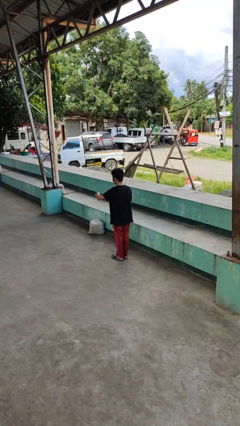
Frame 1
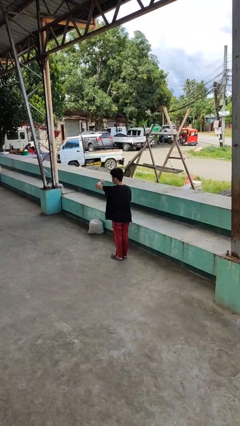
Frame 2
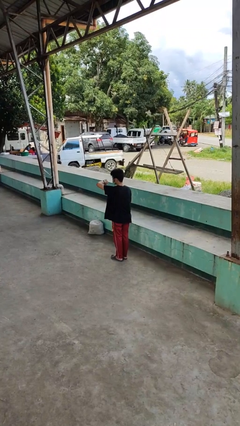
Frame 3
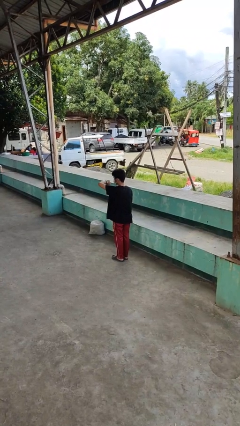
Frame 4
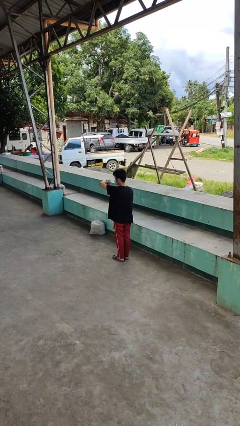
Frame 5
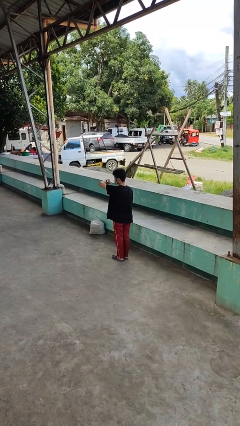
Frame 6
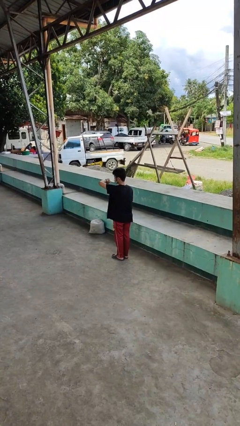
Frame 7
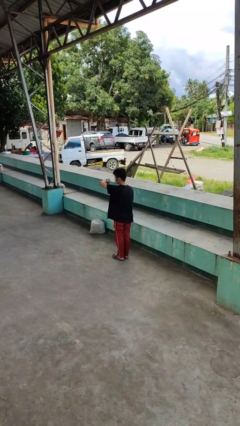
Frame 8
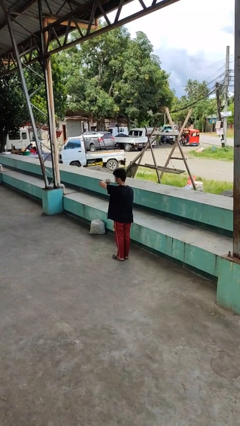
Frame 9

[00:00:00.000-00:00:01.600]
person looks at wristwatch

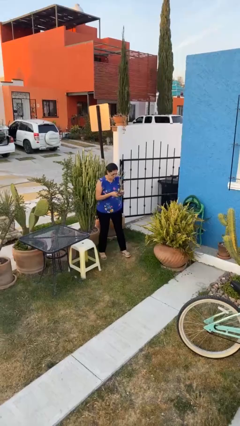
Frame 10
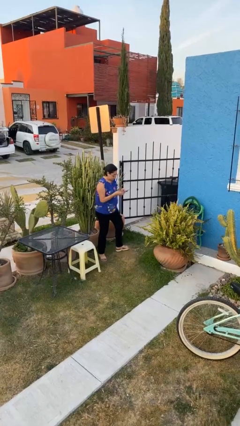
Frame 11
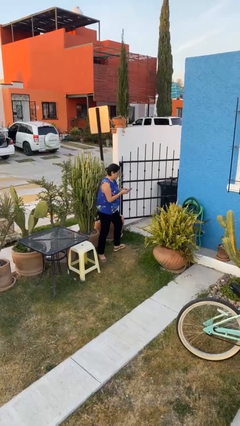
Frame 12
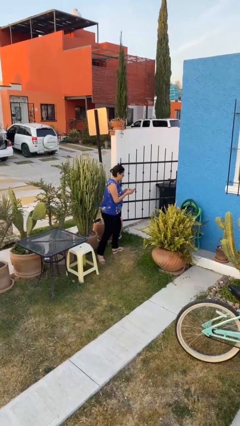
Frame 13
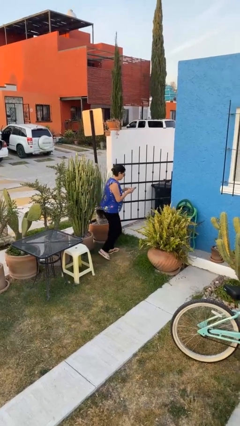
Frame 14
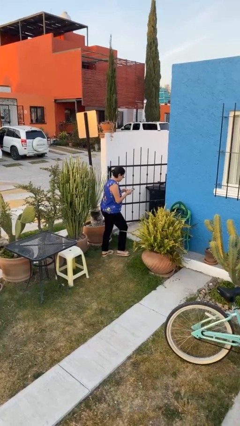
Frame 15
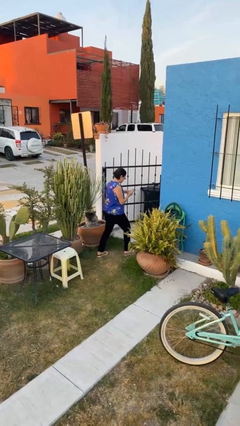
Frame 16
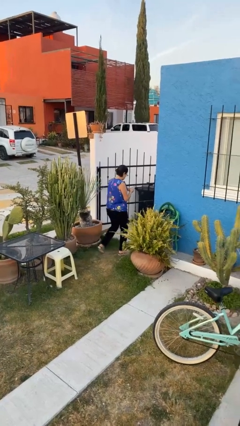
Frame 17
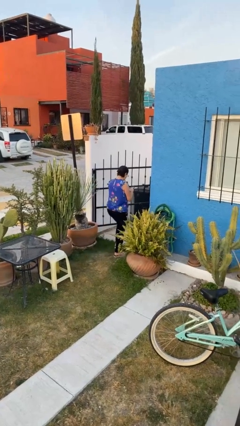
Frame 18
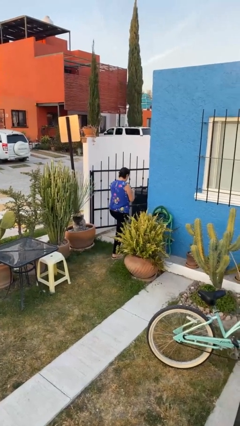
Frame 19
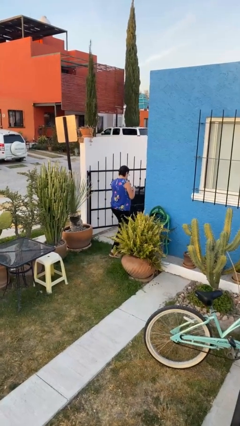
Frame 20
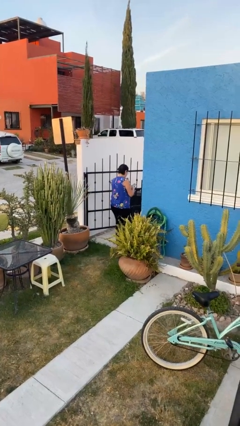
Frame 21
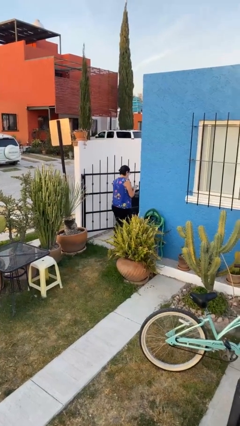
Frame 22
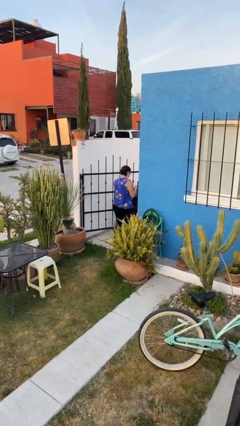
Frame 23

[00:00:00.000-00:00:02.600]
person exits scene through structure

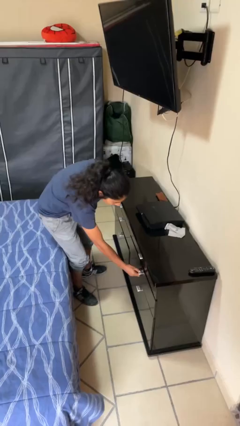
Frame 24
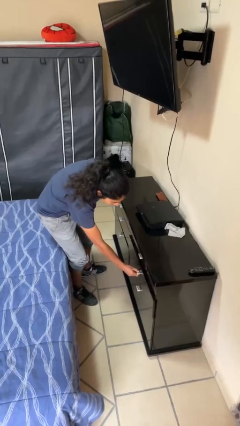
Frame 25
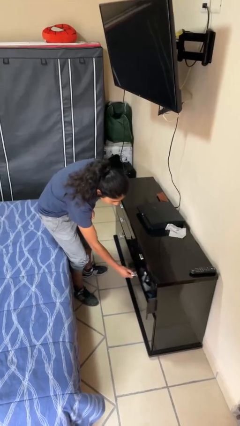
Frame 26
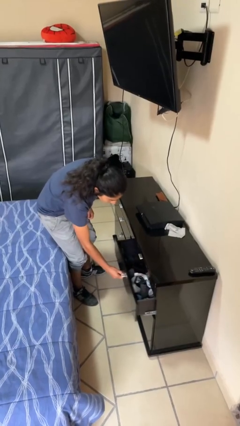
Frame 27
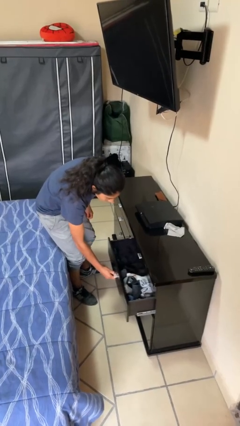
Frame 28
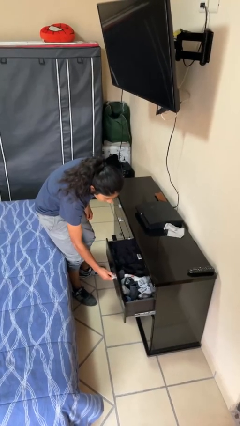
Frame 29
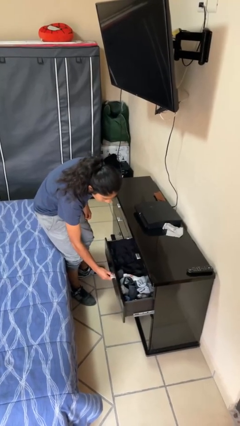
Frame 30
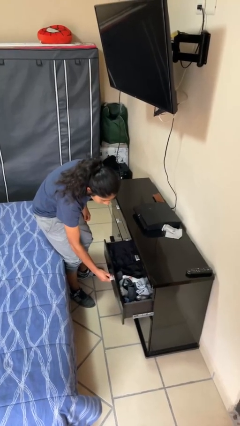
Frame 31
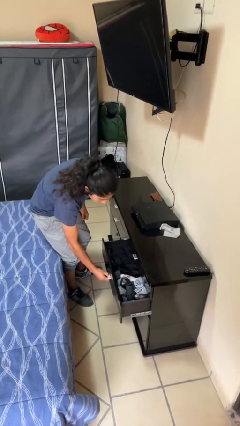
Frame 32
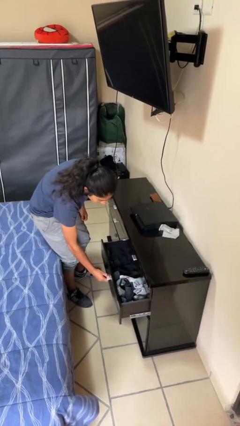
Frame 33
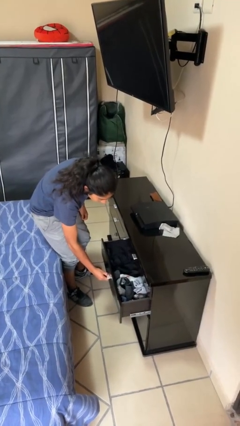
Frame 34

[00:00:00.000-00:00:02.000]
person opens dresser drawer

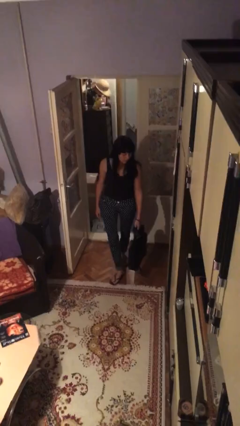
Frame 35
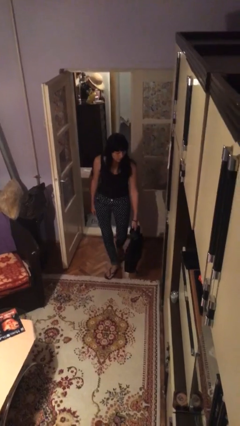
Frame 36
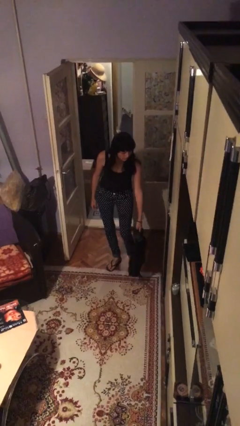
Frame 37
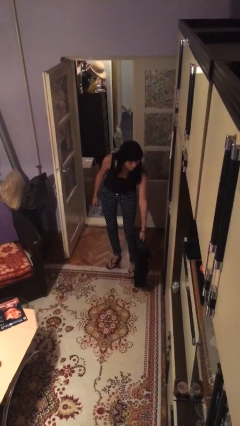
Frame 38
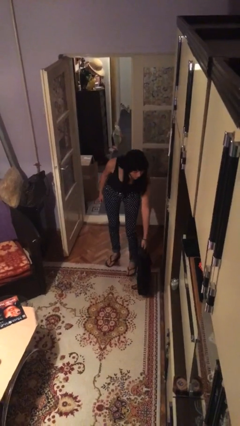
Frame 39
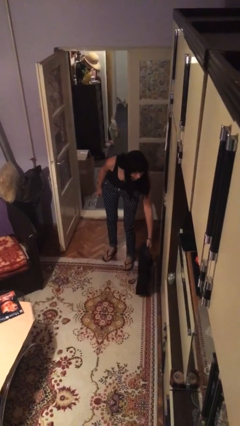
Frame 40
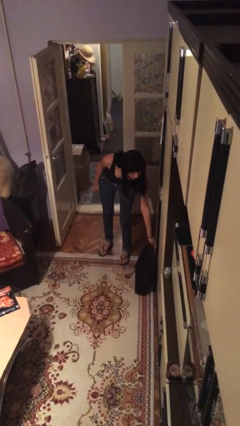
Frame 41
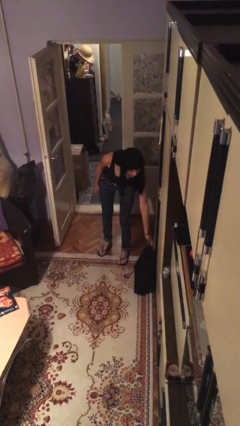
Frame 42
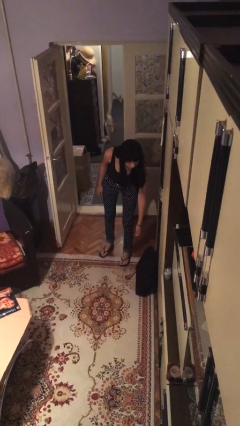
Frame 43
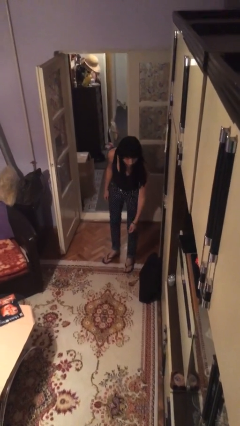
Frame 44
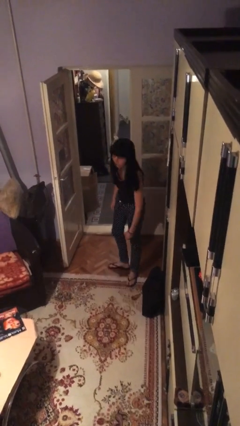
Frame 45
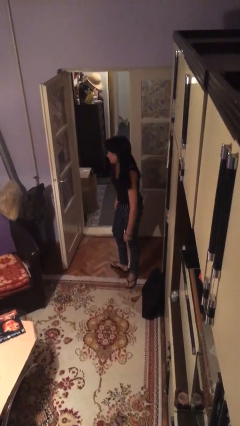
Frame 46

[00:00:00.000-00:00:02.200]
person puts down object on floor

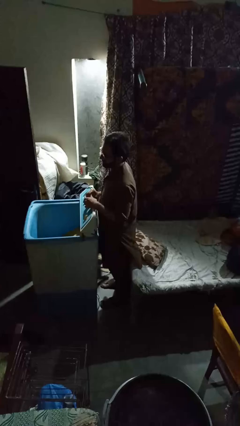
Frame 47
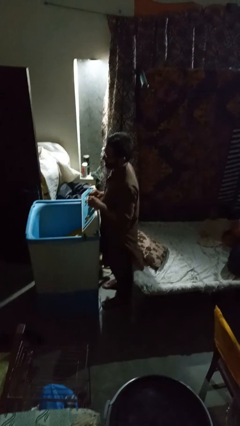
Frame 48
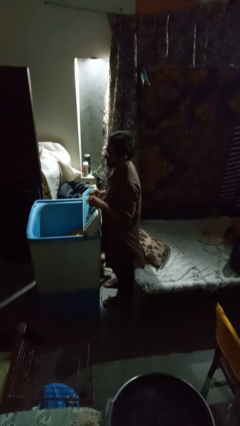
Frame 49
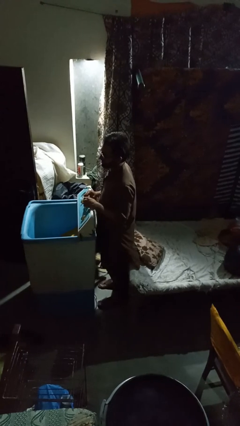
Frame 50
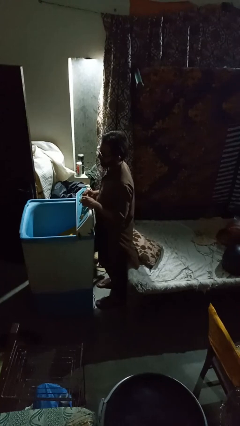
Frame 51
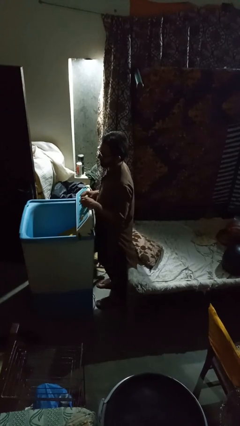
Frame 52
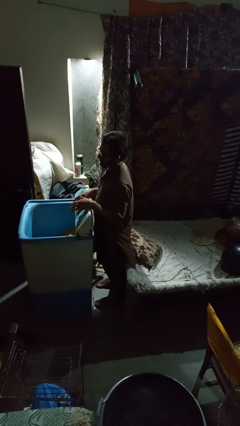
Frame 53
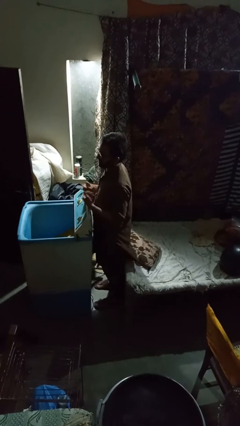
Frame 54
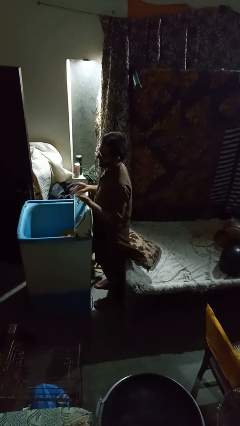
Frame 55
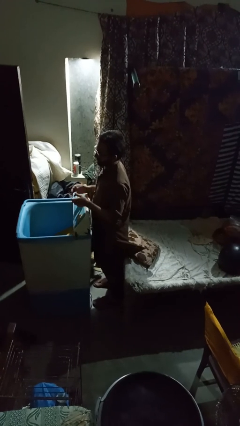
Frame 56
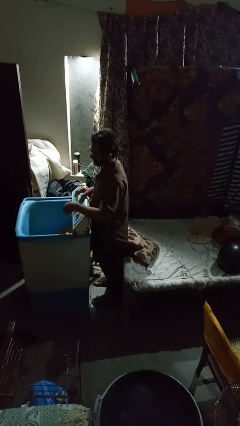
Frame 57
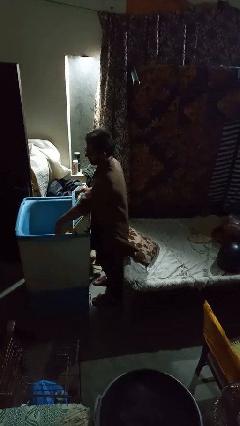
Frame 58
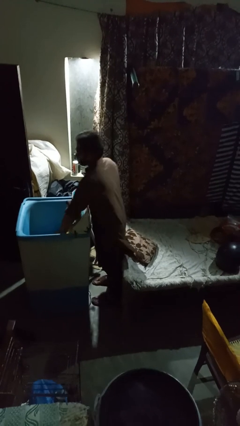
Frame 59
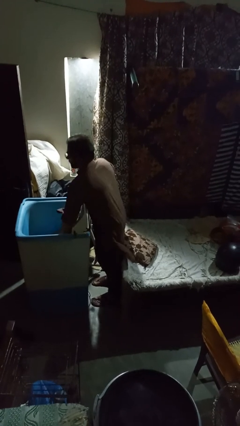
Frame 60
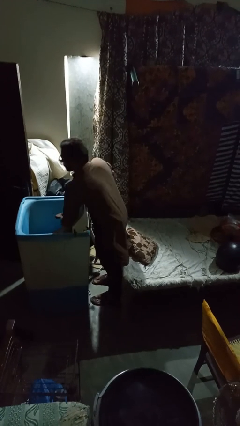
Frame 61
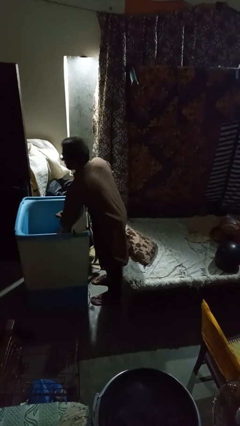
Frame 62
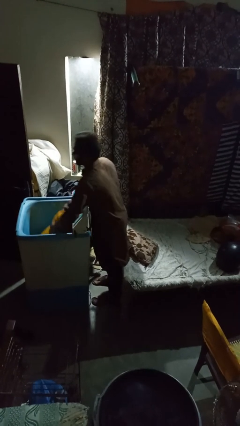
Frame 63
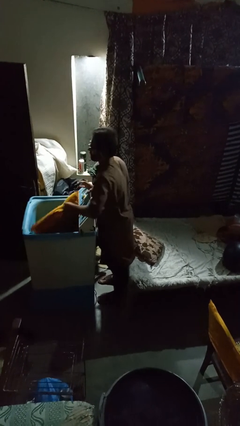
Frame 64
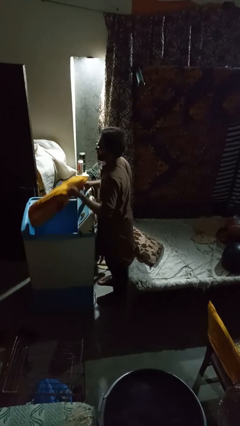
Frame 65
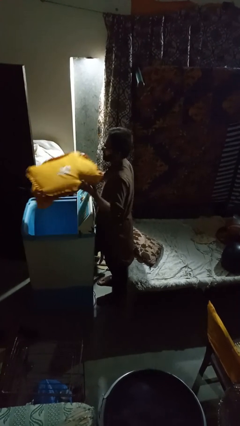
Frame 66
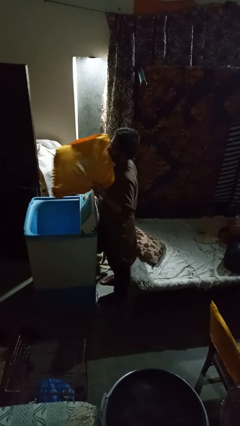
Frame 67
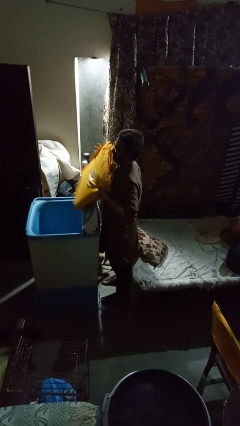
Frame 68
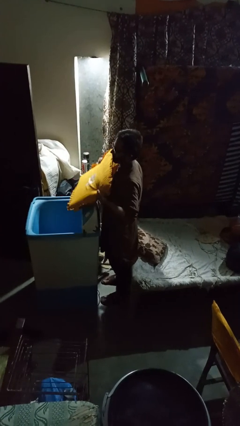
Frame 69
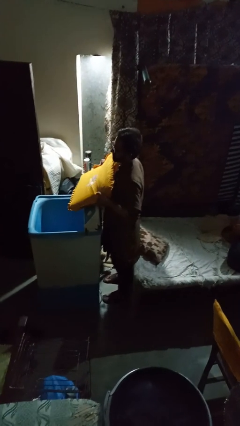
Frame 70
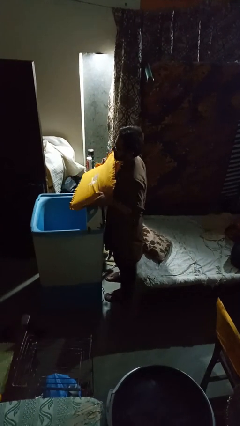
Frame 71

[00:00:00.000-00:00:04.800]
person unloads clotheswasher

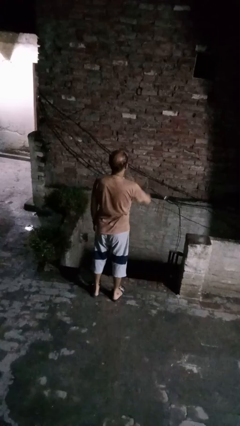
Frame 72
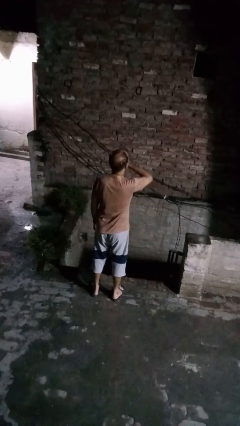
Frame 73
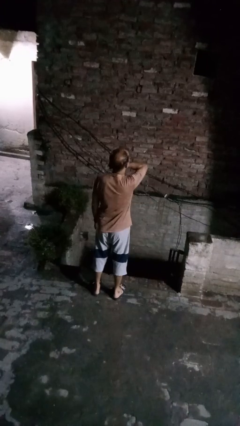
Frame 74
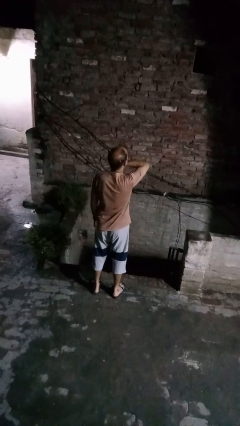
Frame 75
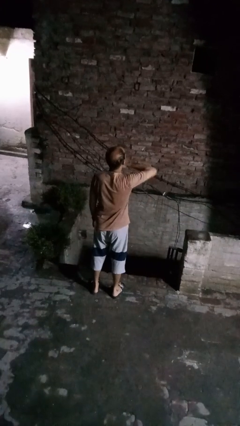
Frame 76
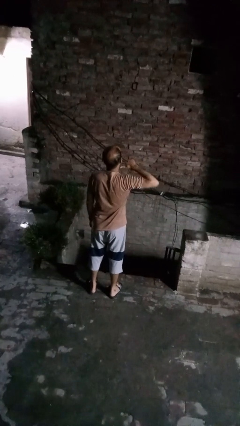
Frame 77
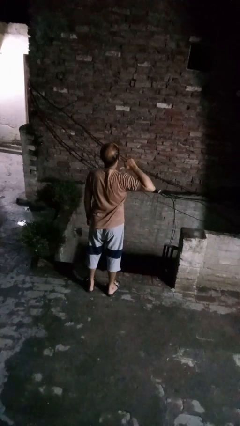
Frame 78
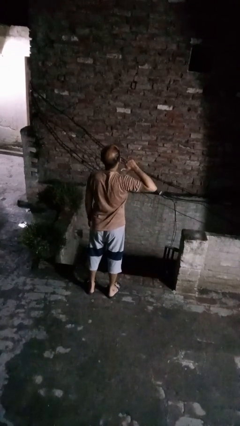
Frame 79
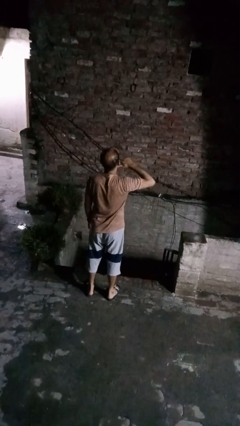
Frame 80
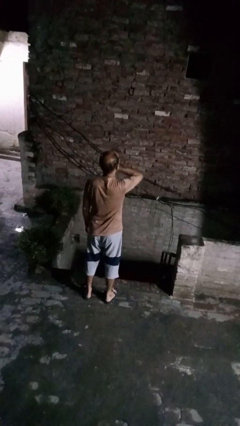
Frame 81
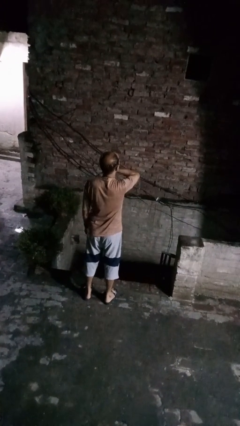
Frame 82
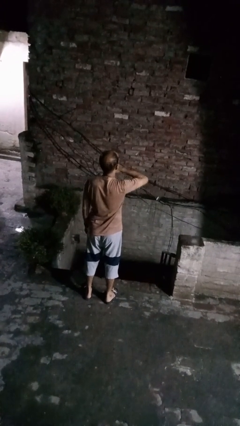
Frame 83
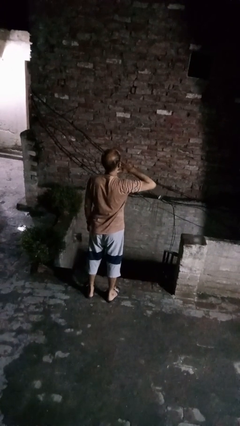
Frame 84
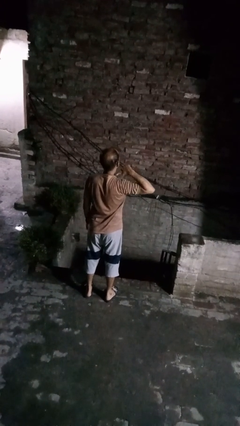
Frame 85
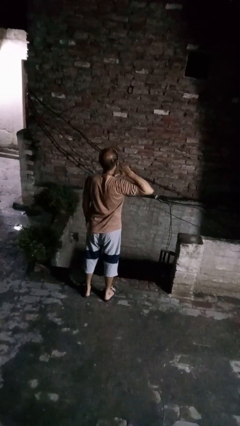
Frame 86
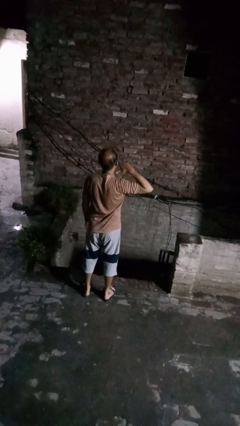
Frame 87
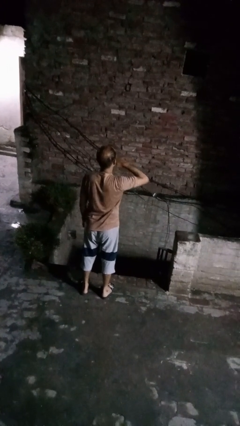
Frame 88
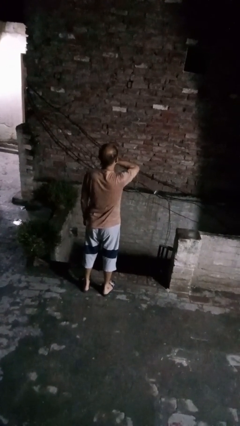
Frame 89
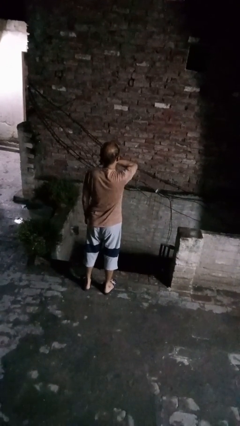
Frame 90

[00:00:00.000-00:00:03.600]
person gestures cut

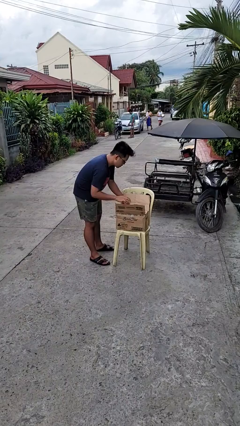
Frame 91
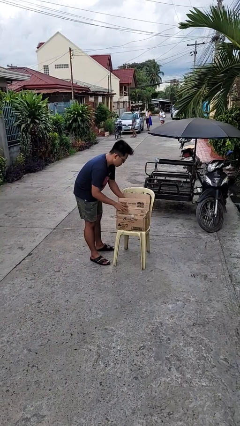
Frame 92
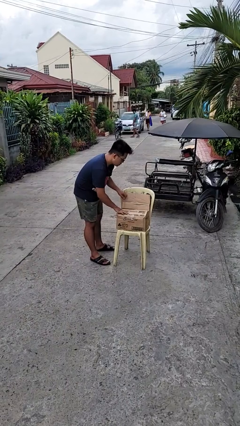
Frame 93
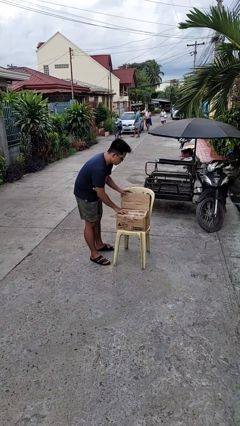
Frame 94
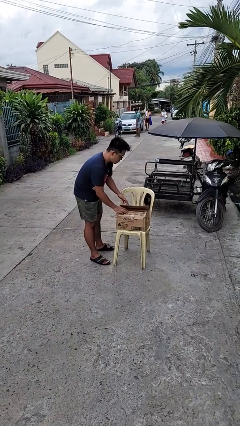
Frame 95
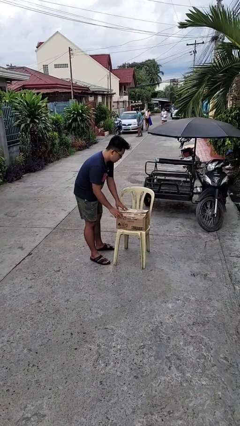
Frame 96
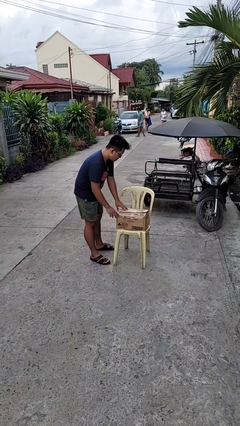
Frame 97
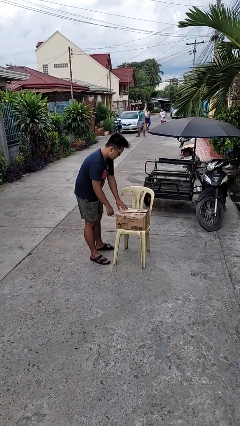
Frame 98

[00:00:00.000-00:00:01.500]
person closes box
